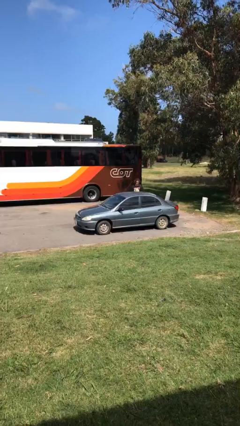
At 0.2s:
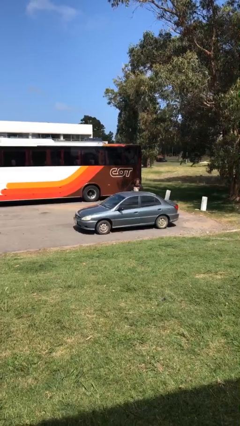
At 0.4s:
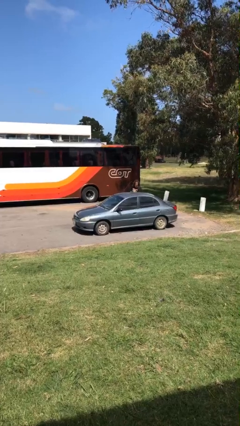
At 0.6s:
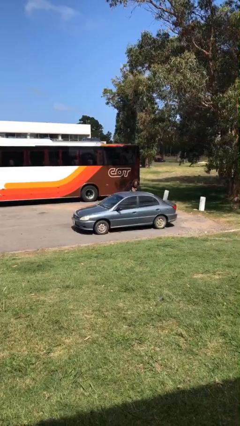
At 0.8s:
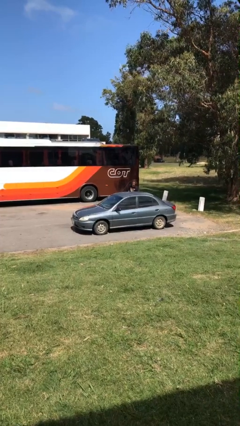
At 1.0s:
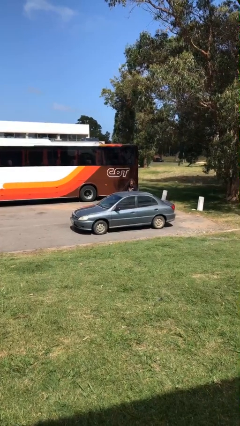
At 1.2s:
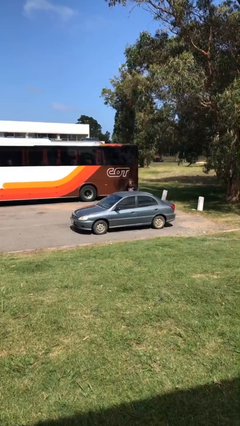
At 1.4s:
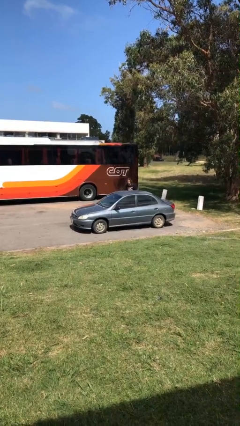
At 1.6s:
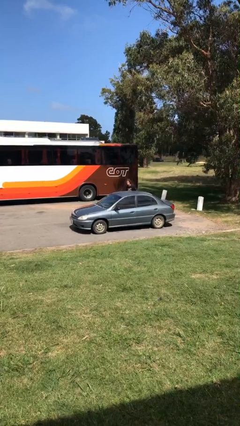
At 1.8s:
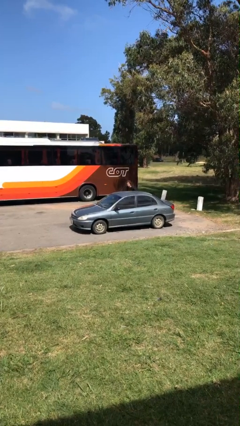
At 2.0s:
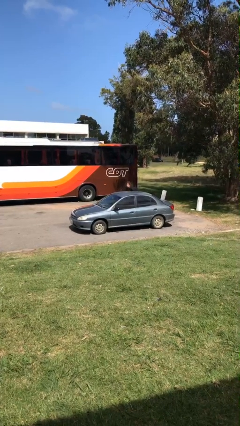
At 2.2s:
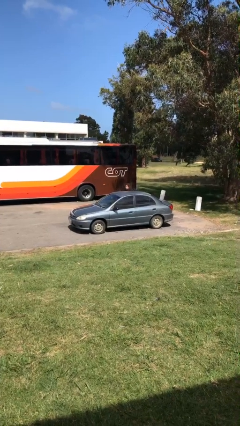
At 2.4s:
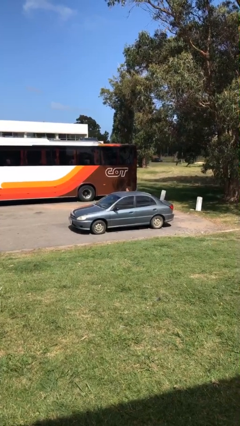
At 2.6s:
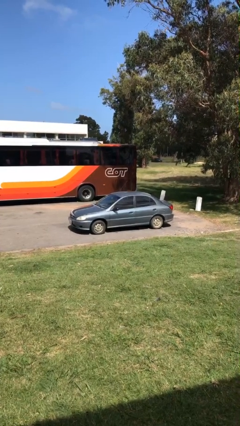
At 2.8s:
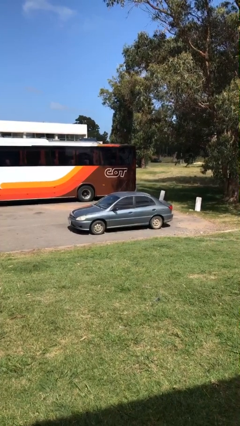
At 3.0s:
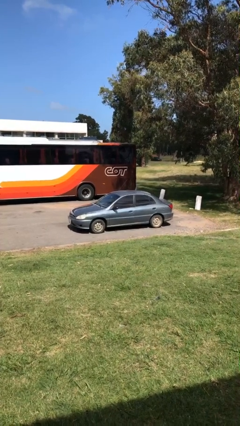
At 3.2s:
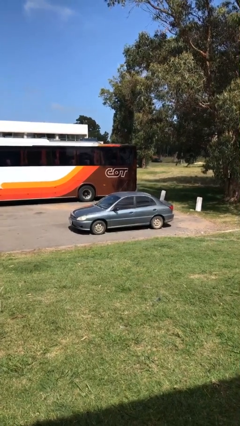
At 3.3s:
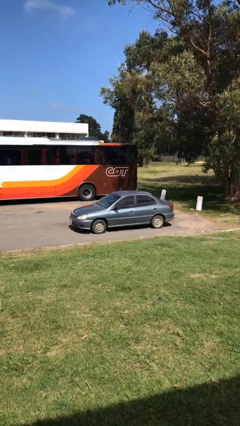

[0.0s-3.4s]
car picks up person

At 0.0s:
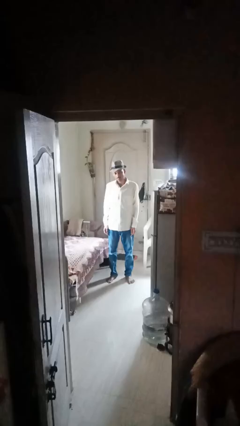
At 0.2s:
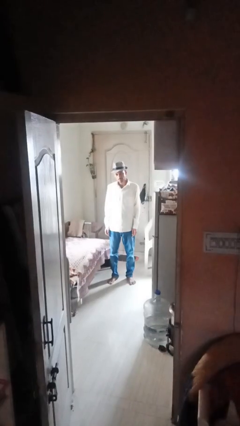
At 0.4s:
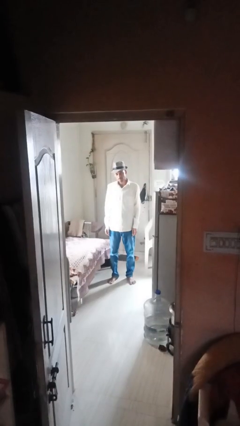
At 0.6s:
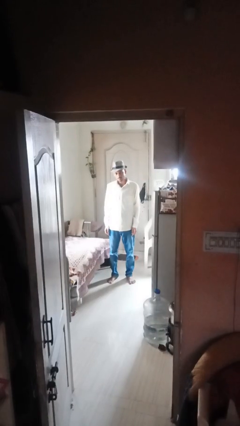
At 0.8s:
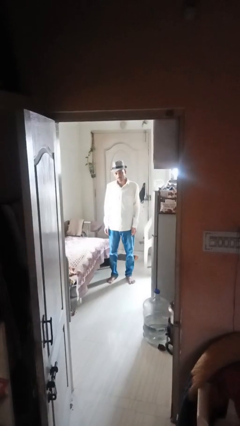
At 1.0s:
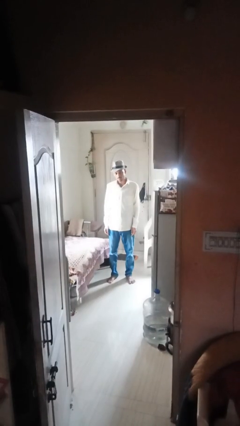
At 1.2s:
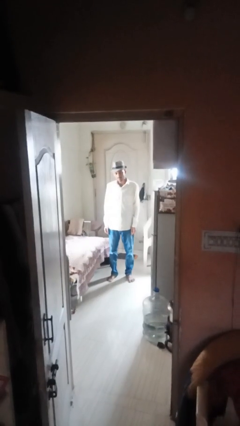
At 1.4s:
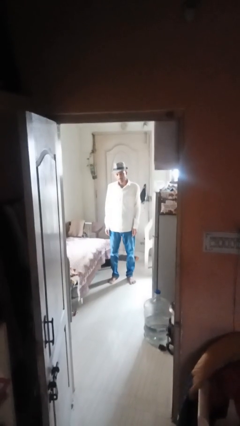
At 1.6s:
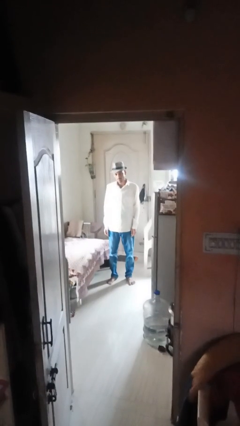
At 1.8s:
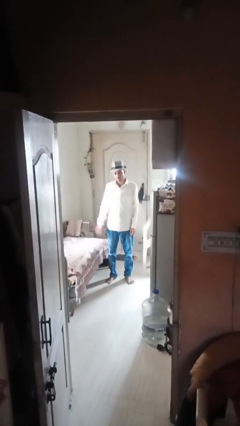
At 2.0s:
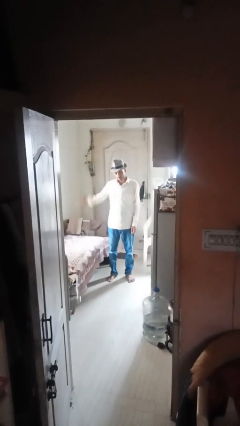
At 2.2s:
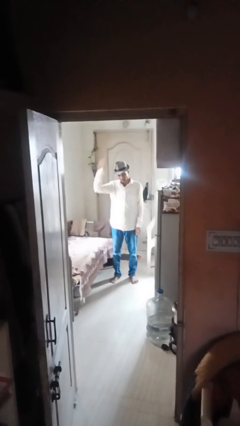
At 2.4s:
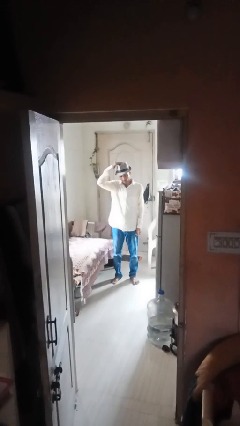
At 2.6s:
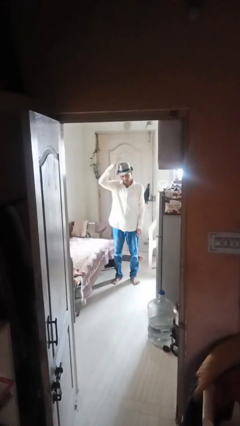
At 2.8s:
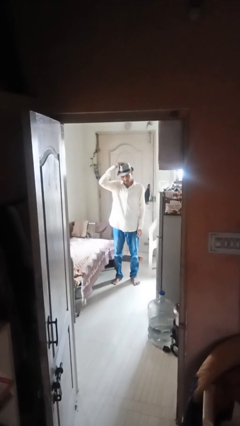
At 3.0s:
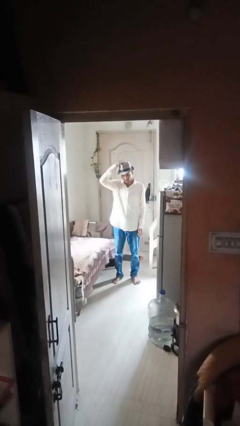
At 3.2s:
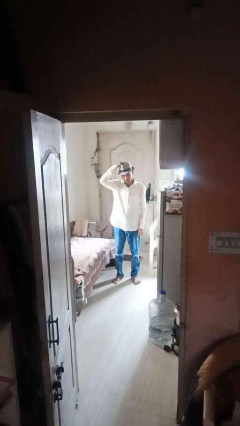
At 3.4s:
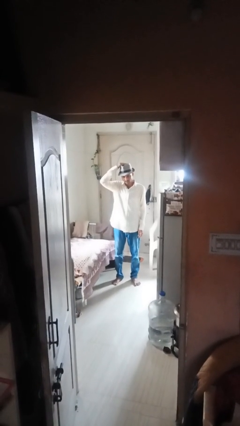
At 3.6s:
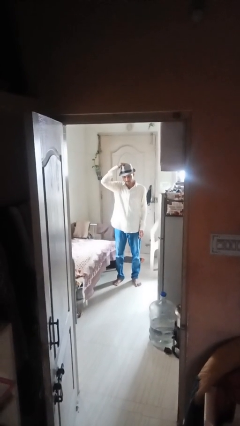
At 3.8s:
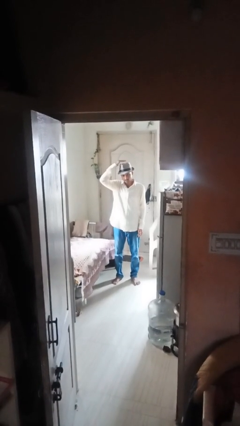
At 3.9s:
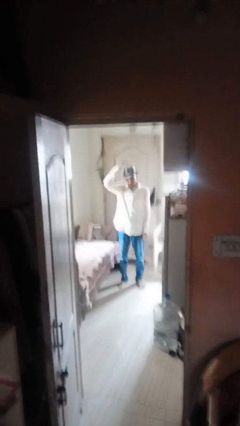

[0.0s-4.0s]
person pats head

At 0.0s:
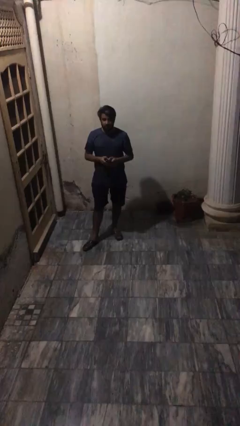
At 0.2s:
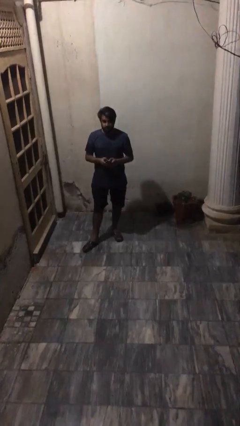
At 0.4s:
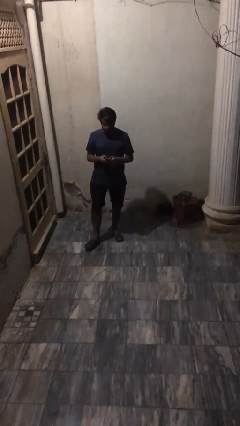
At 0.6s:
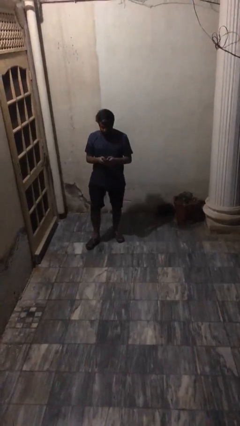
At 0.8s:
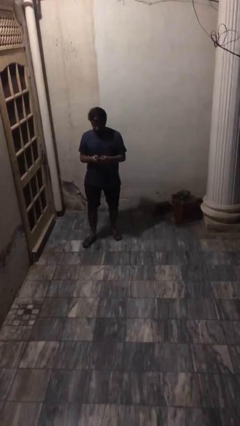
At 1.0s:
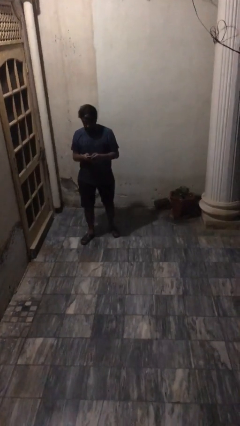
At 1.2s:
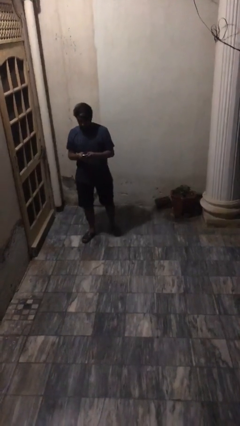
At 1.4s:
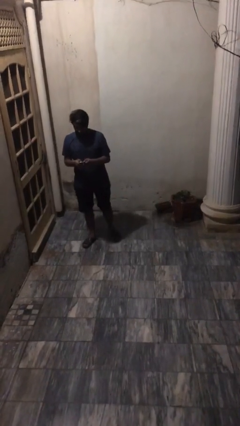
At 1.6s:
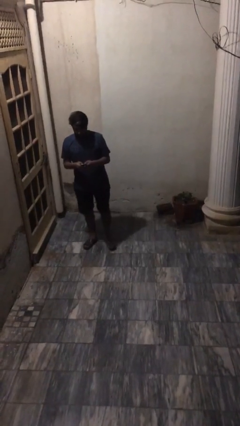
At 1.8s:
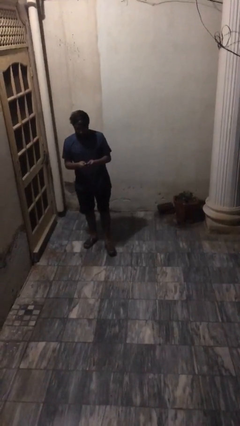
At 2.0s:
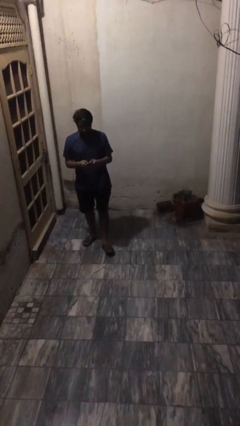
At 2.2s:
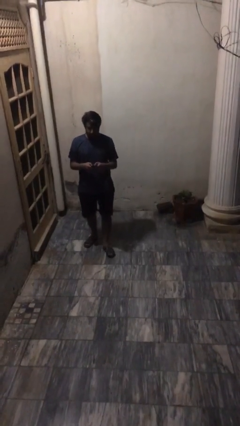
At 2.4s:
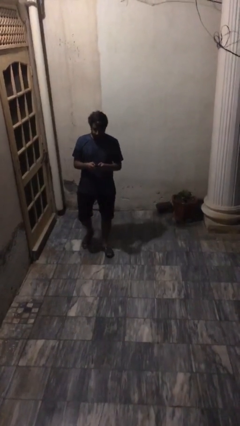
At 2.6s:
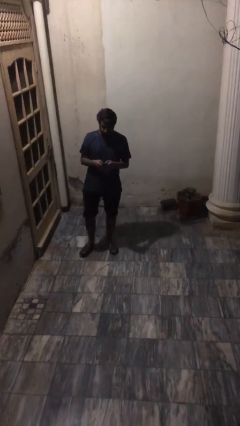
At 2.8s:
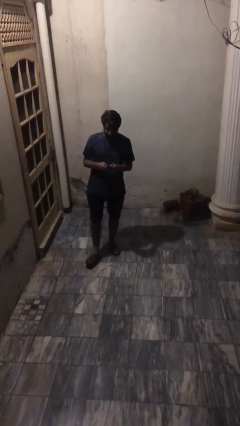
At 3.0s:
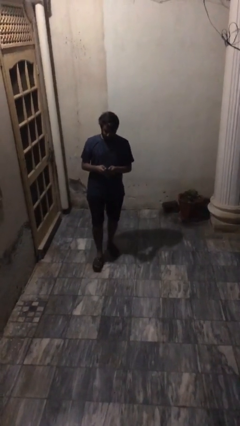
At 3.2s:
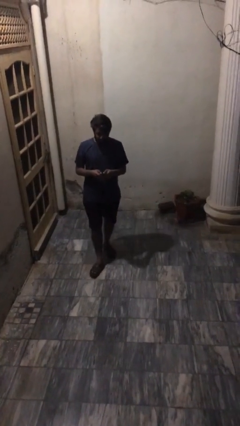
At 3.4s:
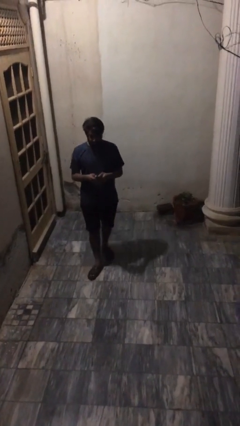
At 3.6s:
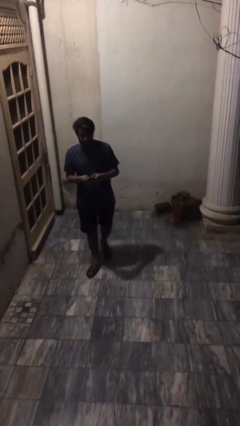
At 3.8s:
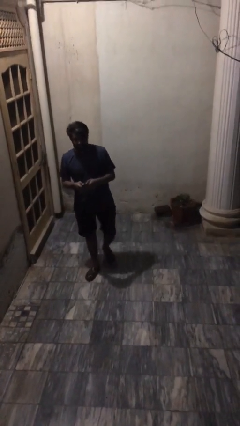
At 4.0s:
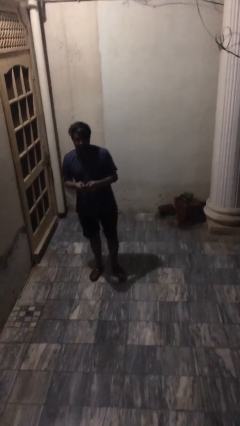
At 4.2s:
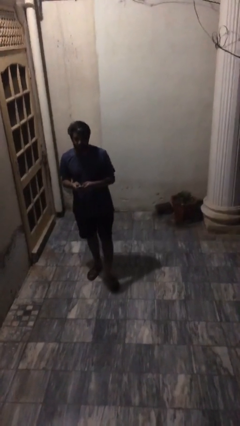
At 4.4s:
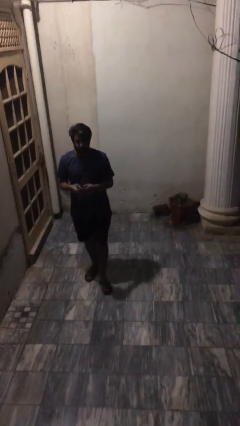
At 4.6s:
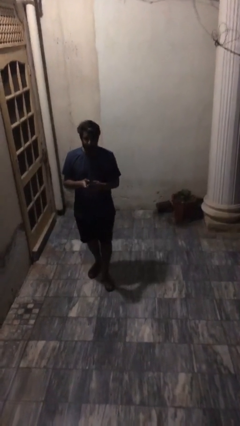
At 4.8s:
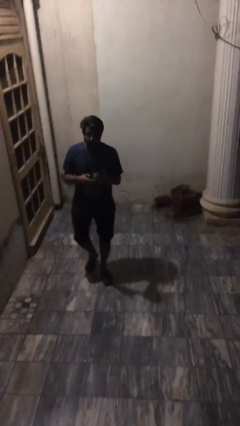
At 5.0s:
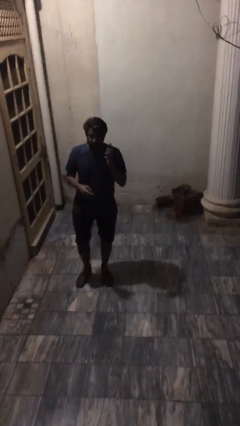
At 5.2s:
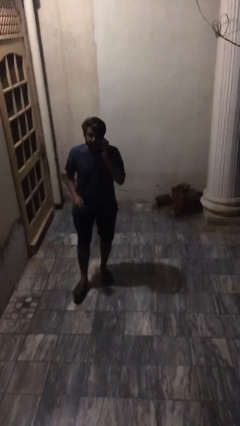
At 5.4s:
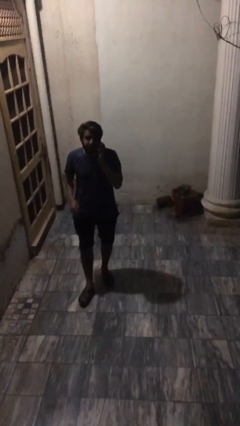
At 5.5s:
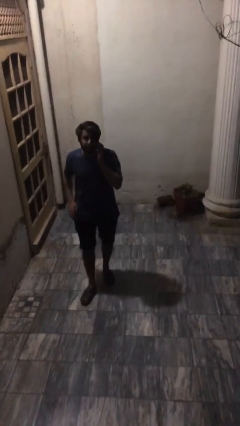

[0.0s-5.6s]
person texts on phone

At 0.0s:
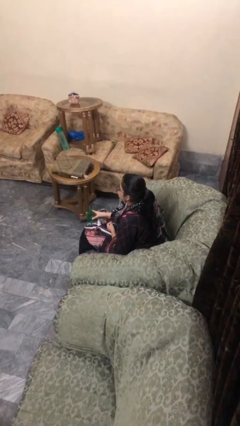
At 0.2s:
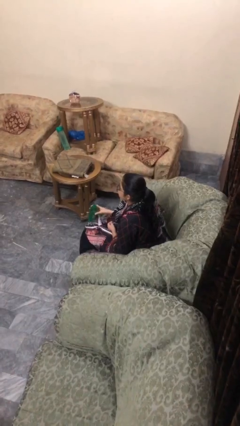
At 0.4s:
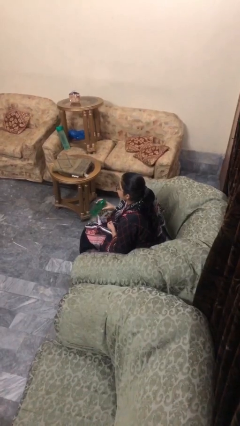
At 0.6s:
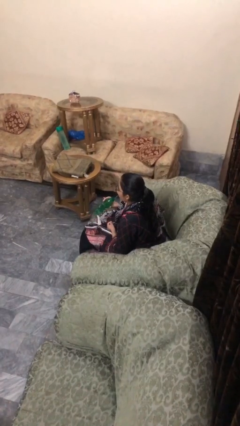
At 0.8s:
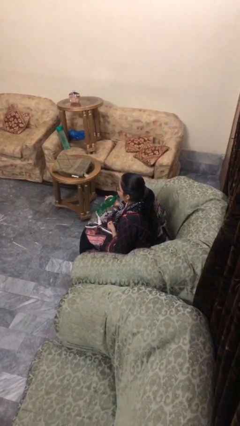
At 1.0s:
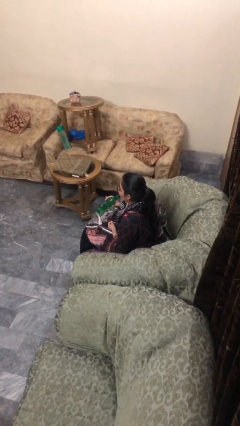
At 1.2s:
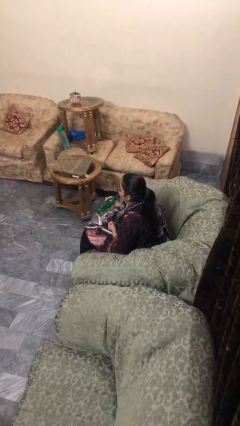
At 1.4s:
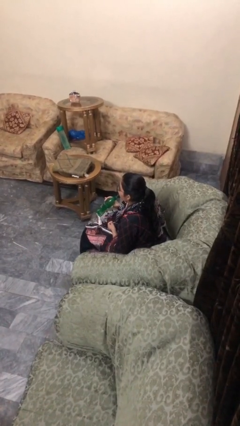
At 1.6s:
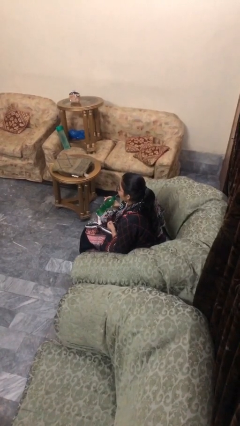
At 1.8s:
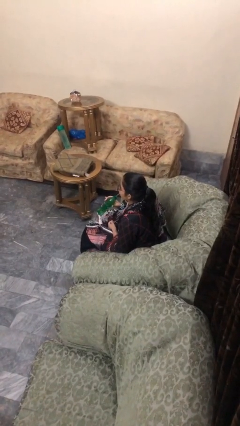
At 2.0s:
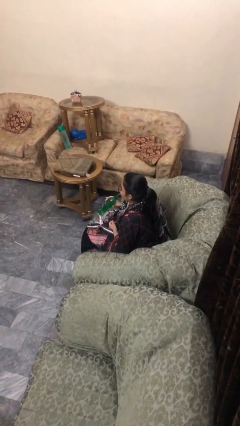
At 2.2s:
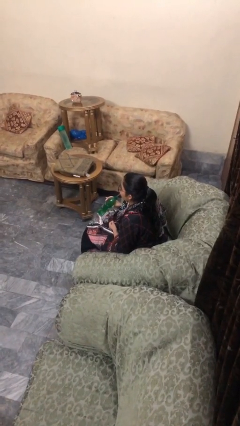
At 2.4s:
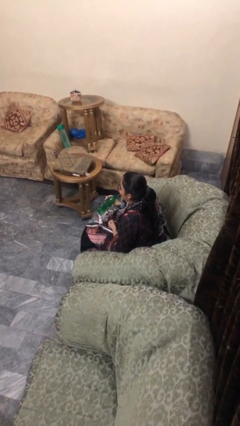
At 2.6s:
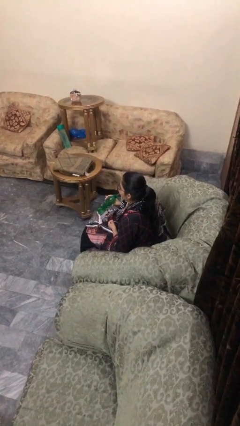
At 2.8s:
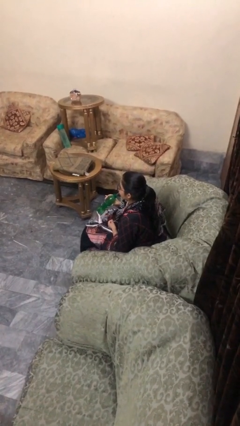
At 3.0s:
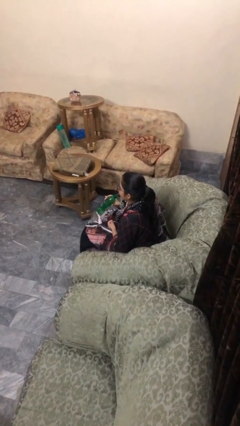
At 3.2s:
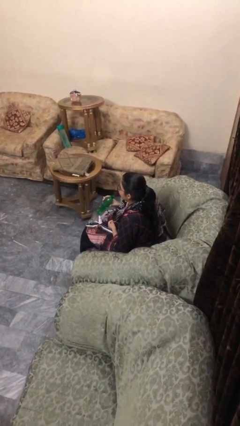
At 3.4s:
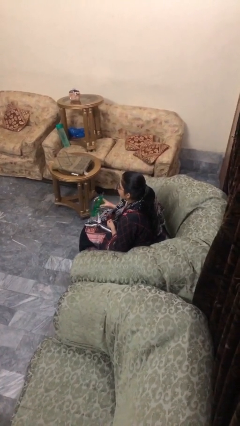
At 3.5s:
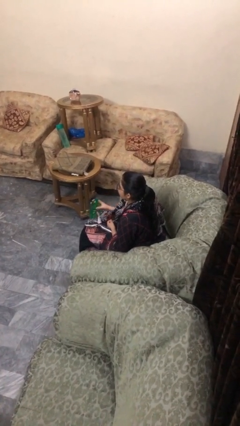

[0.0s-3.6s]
person drinks from straw

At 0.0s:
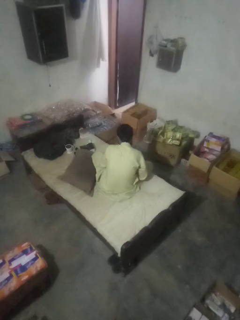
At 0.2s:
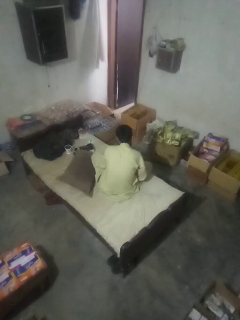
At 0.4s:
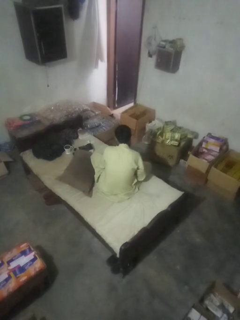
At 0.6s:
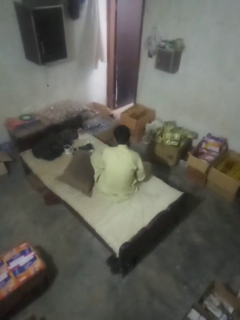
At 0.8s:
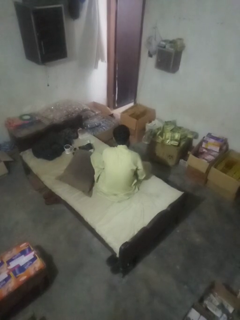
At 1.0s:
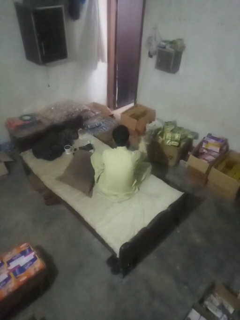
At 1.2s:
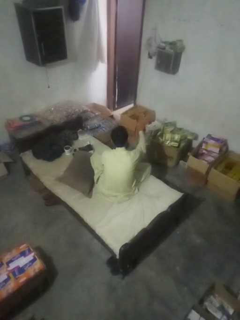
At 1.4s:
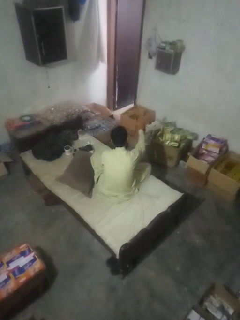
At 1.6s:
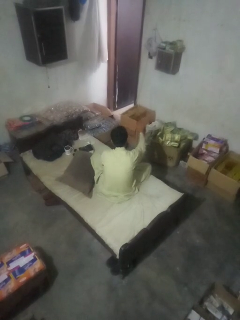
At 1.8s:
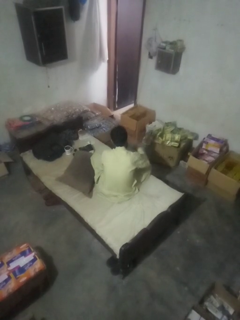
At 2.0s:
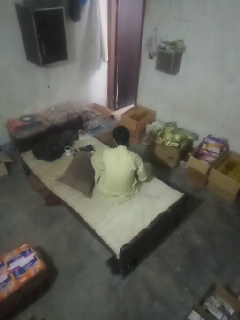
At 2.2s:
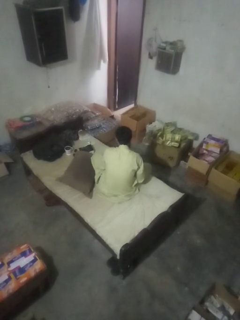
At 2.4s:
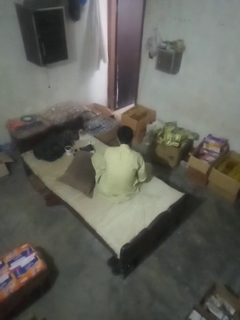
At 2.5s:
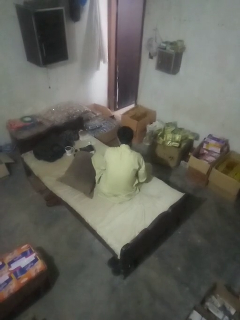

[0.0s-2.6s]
person gestures stop
